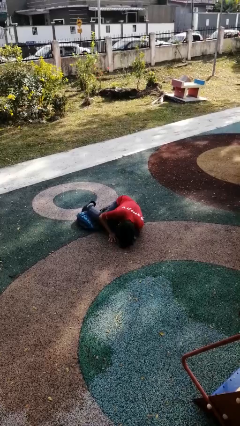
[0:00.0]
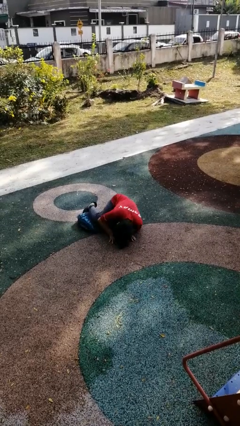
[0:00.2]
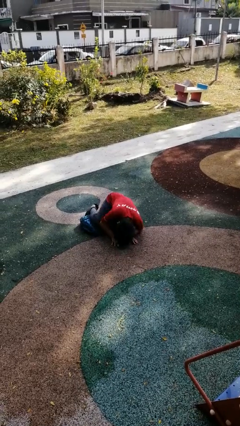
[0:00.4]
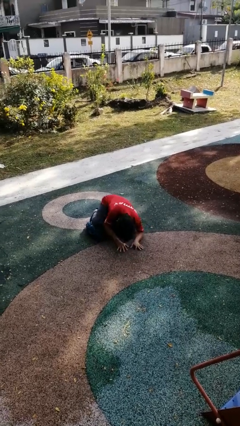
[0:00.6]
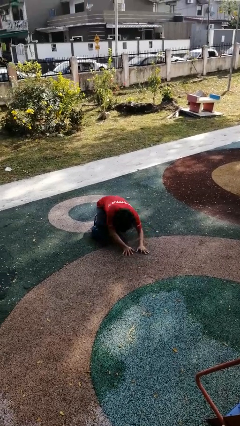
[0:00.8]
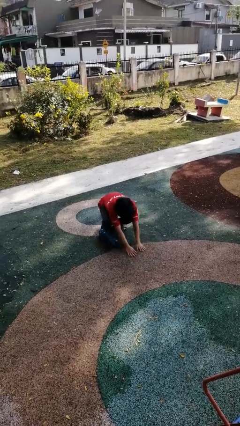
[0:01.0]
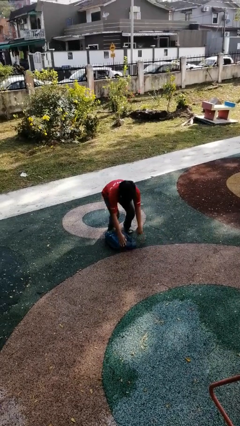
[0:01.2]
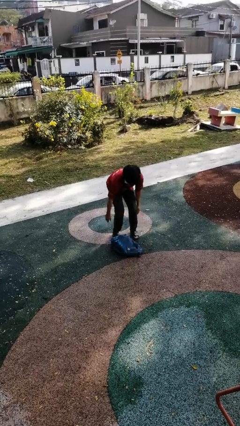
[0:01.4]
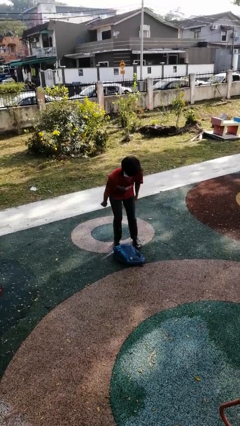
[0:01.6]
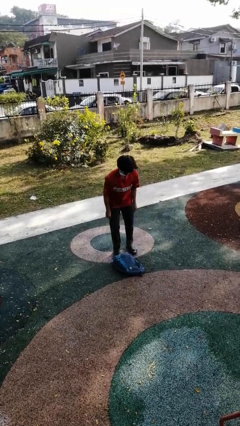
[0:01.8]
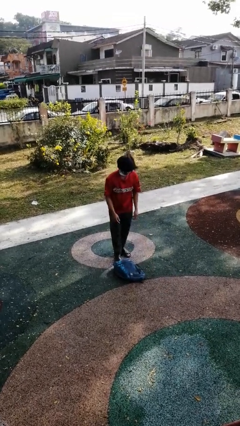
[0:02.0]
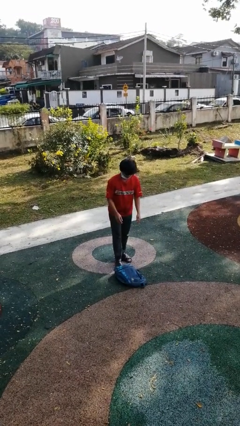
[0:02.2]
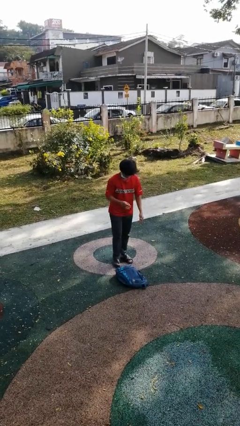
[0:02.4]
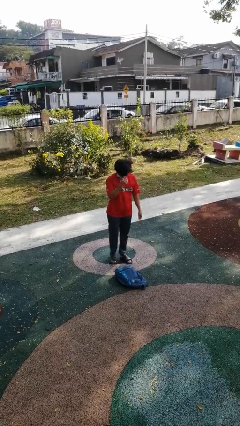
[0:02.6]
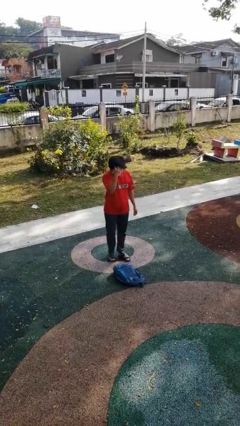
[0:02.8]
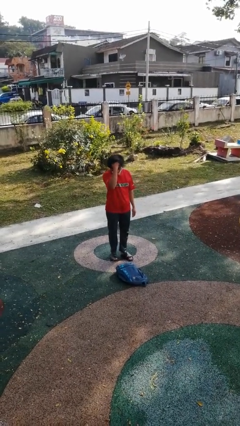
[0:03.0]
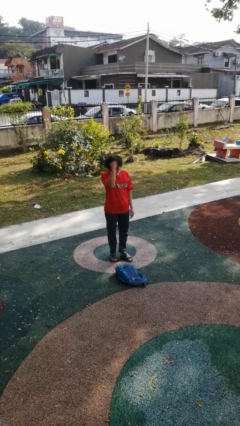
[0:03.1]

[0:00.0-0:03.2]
person stands up from floor

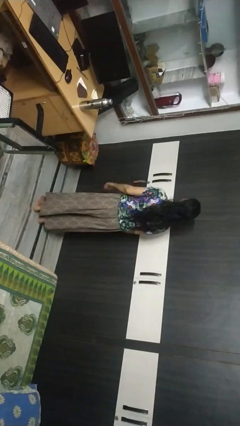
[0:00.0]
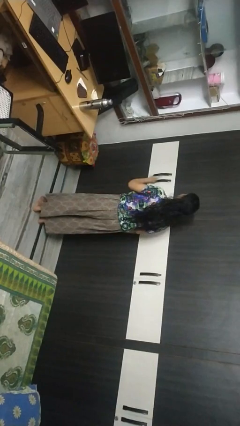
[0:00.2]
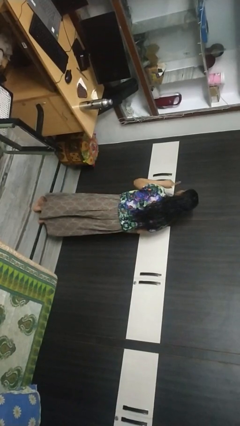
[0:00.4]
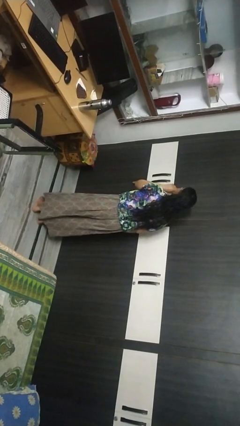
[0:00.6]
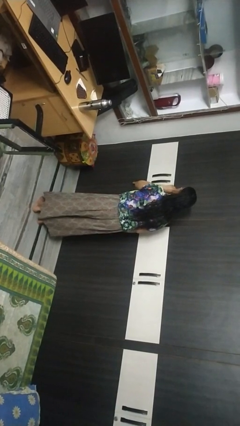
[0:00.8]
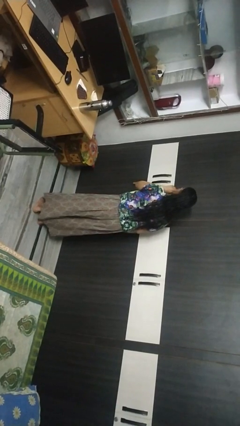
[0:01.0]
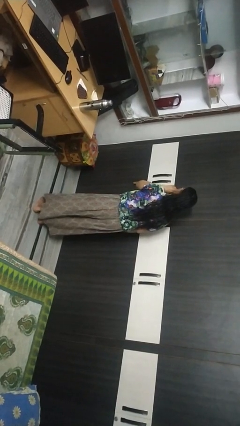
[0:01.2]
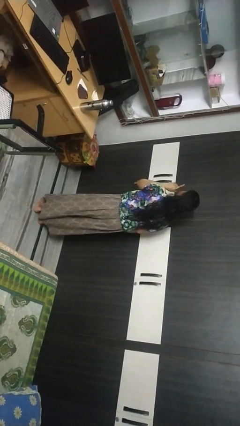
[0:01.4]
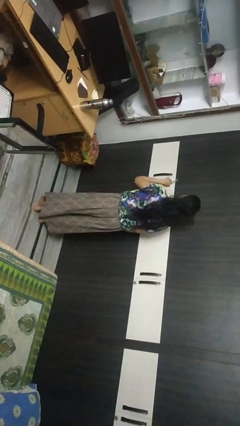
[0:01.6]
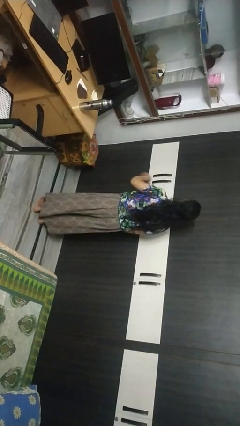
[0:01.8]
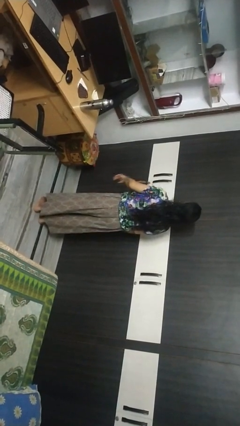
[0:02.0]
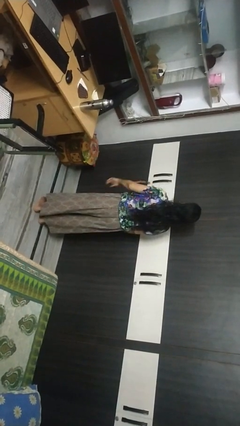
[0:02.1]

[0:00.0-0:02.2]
person gestures be quiet

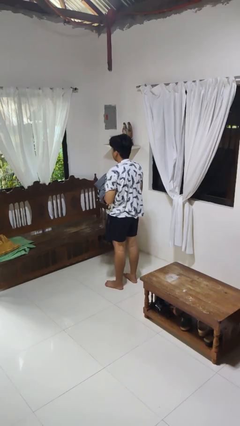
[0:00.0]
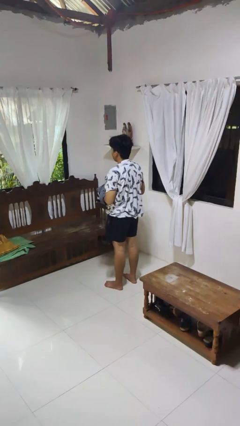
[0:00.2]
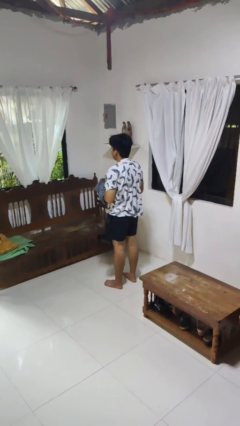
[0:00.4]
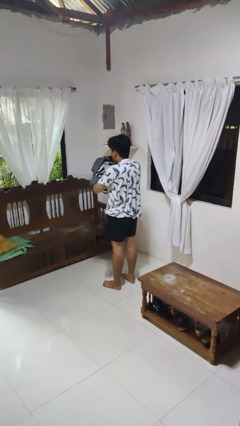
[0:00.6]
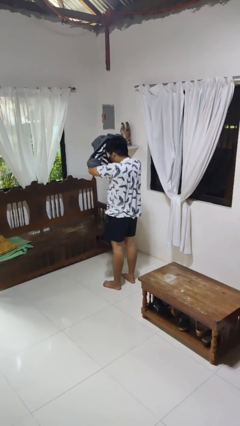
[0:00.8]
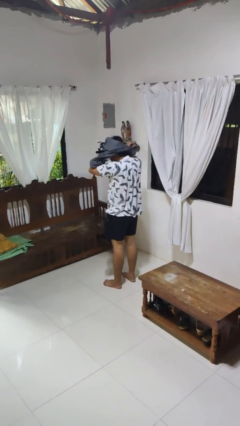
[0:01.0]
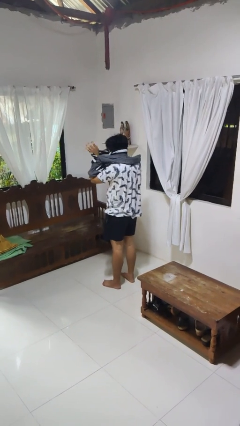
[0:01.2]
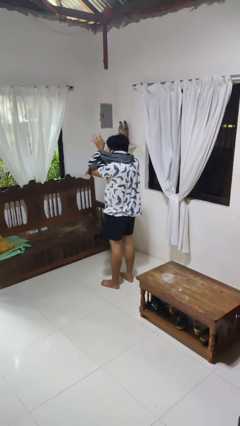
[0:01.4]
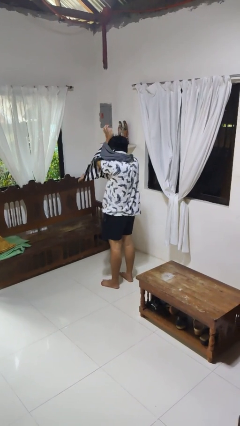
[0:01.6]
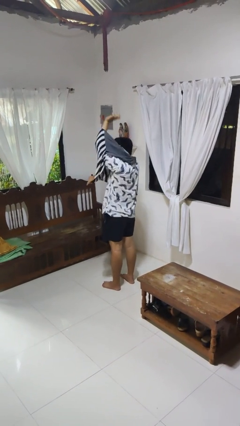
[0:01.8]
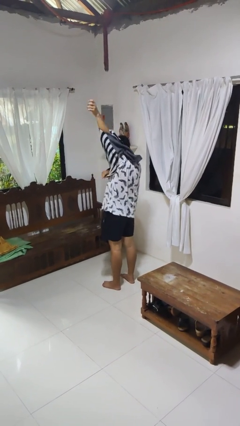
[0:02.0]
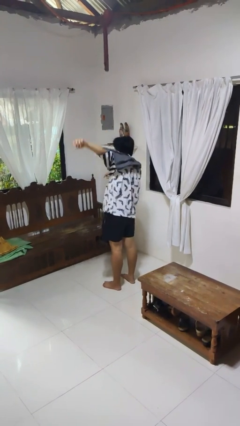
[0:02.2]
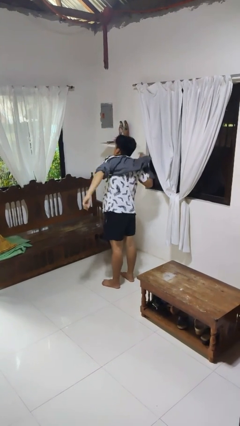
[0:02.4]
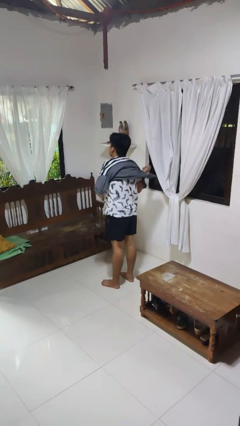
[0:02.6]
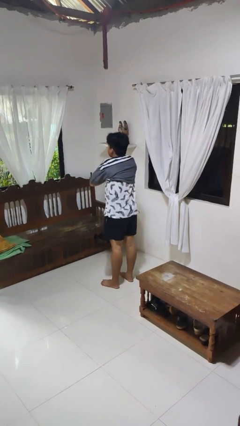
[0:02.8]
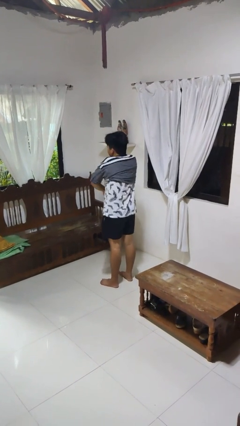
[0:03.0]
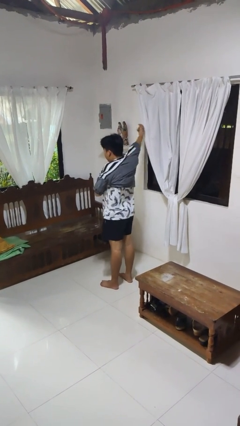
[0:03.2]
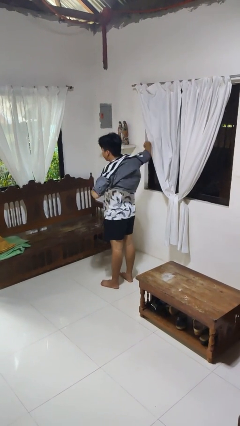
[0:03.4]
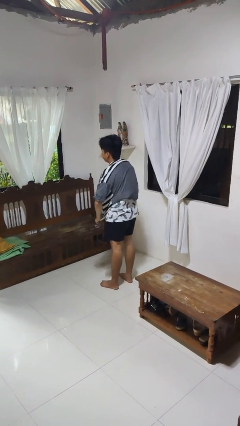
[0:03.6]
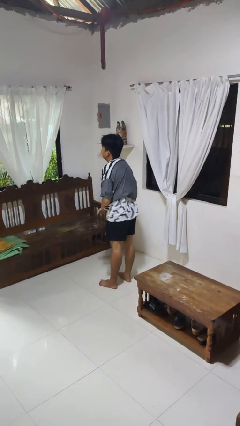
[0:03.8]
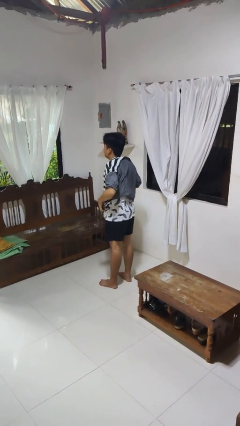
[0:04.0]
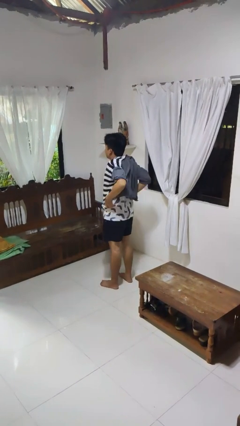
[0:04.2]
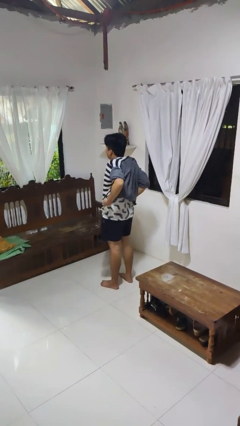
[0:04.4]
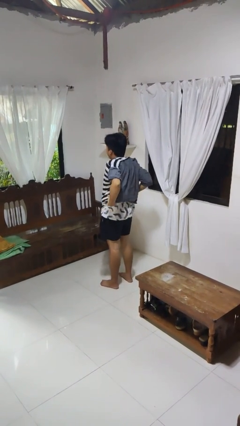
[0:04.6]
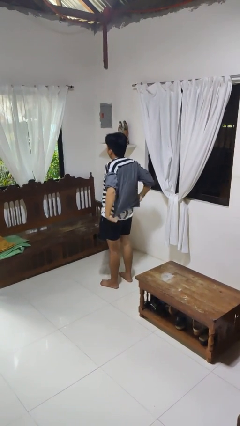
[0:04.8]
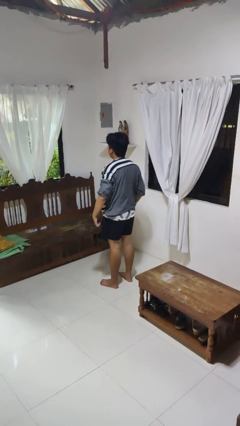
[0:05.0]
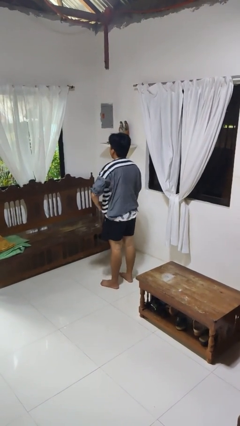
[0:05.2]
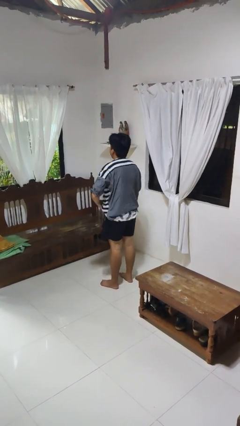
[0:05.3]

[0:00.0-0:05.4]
person puts on shirt

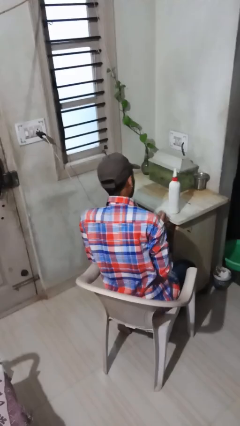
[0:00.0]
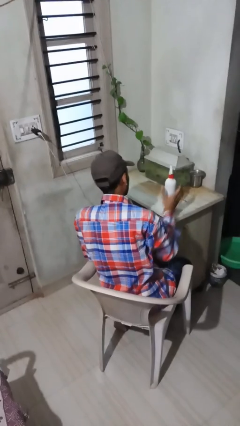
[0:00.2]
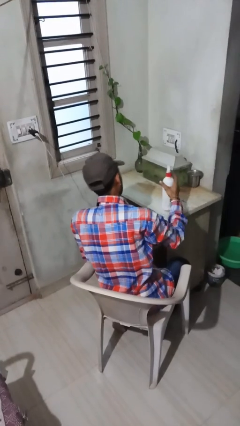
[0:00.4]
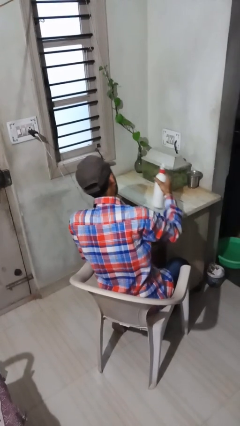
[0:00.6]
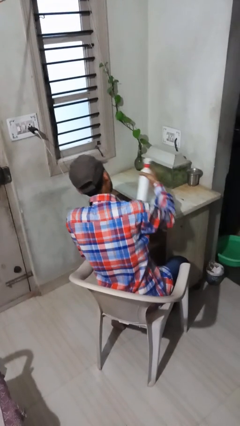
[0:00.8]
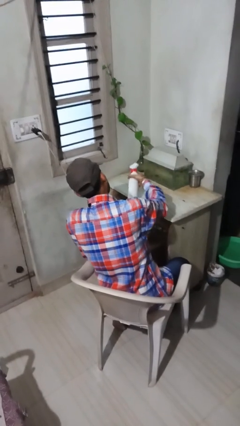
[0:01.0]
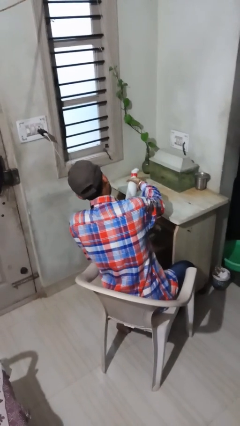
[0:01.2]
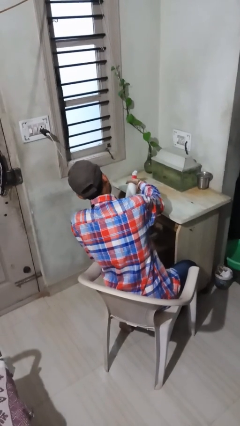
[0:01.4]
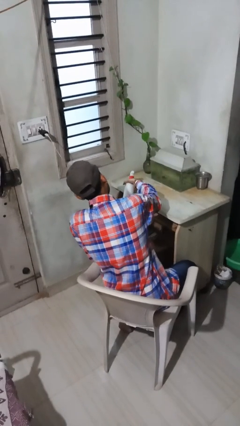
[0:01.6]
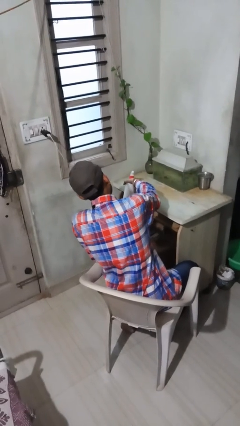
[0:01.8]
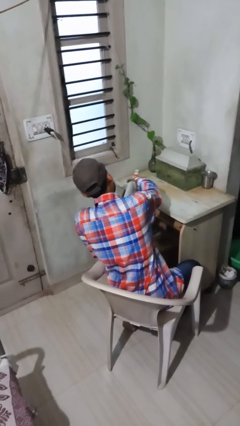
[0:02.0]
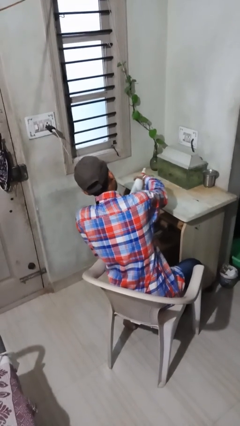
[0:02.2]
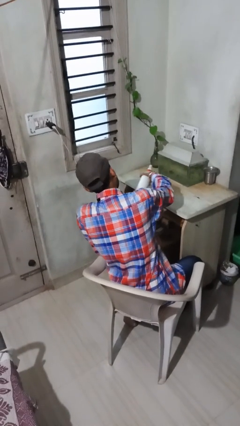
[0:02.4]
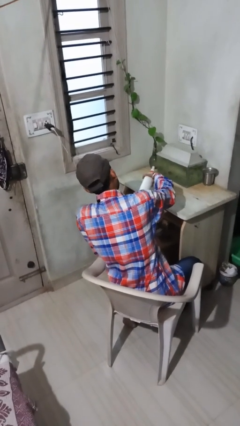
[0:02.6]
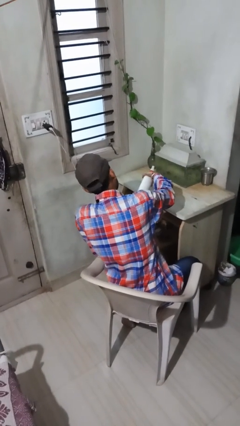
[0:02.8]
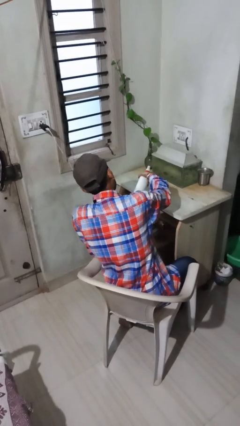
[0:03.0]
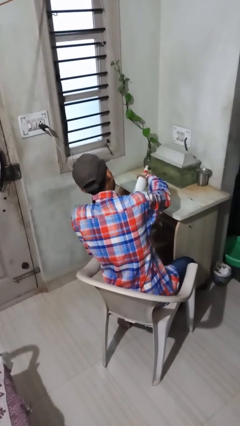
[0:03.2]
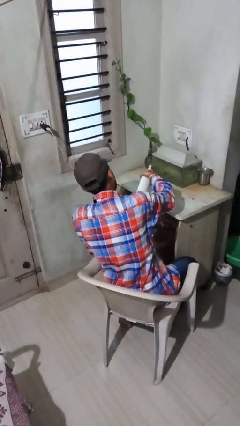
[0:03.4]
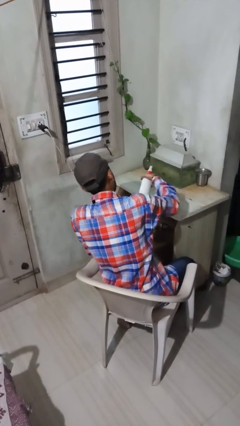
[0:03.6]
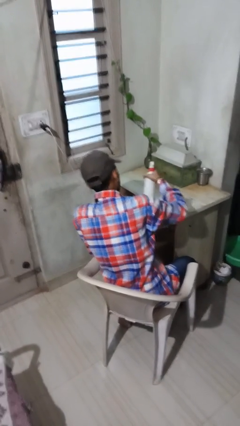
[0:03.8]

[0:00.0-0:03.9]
person sprays from bottle

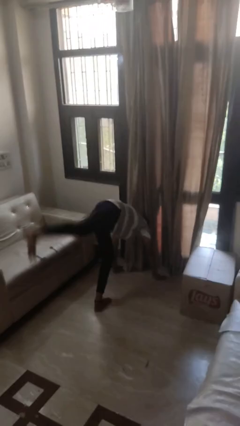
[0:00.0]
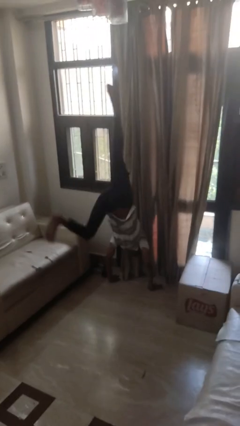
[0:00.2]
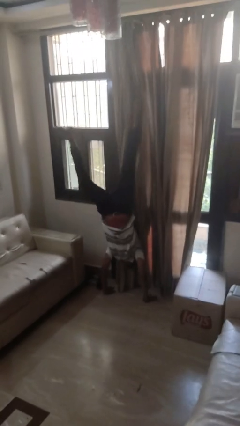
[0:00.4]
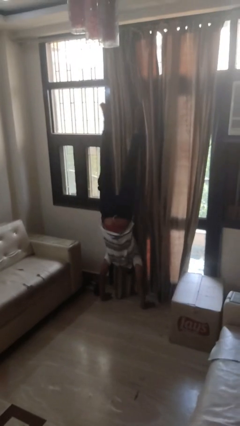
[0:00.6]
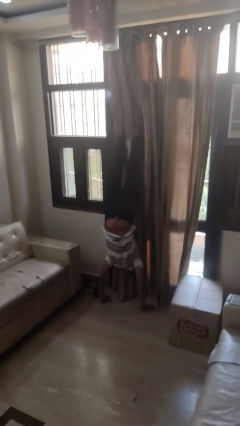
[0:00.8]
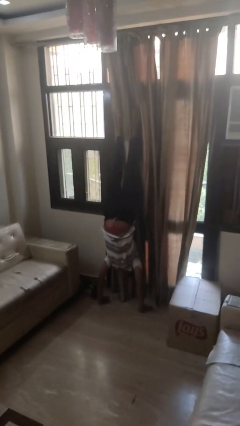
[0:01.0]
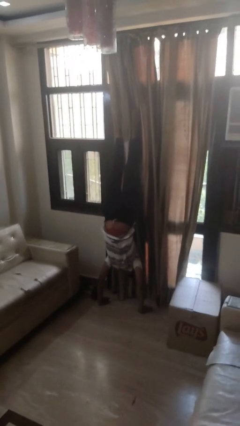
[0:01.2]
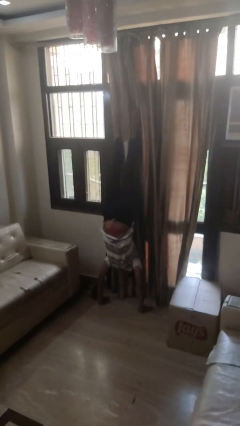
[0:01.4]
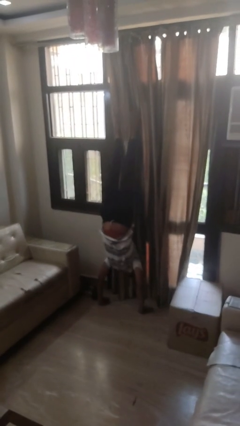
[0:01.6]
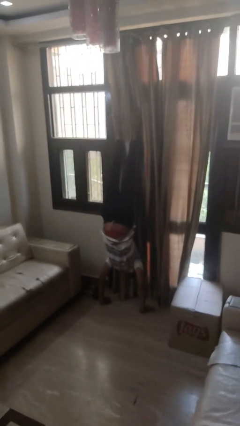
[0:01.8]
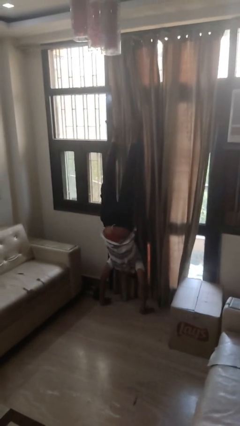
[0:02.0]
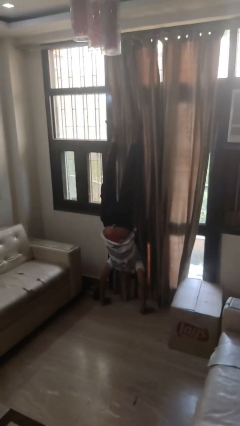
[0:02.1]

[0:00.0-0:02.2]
person handstand

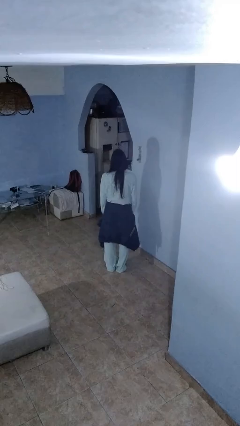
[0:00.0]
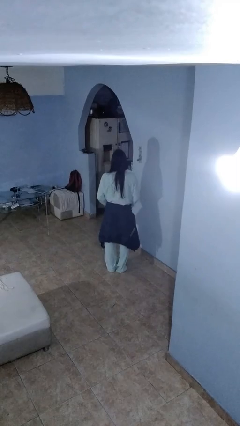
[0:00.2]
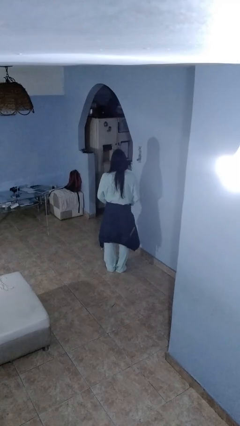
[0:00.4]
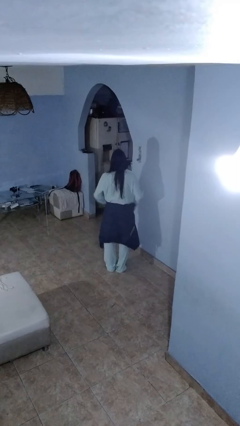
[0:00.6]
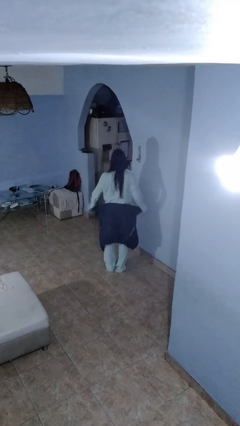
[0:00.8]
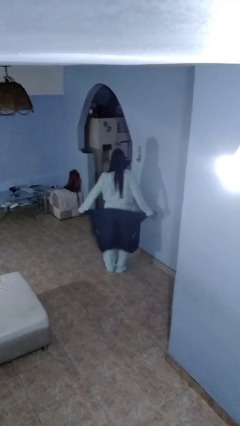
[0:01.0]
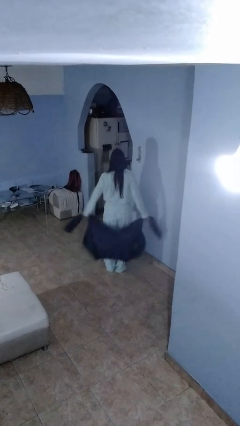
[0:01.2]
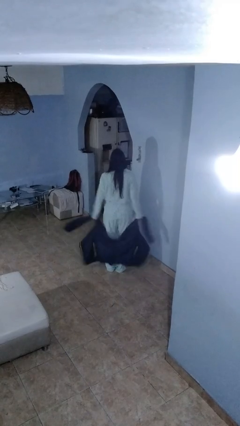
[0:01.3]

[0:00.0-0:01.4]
person unties jacket around waist
